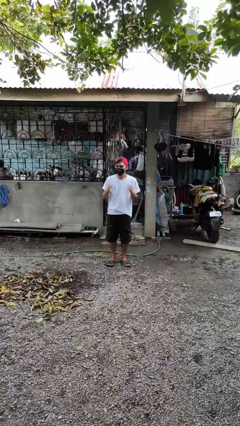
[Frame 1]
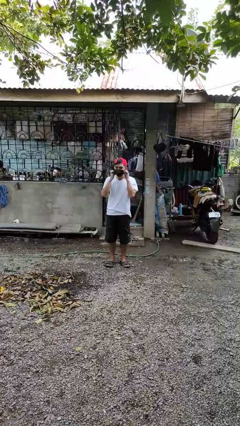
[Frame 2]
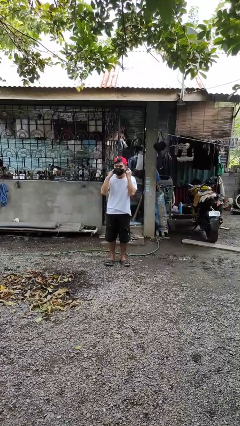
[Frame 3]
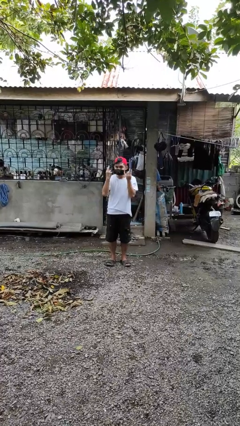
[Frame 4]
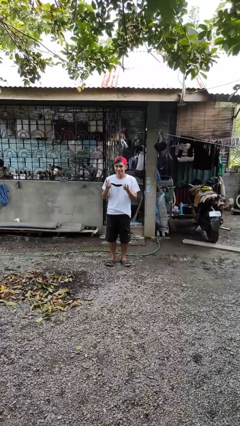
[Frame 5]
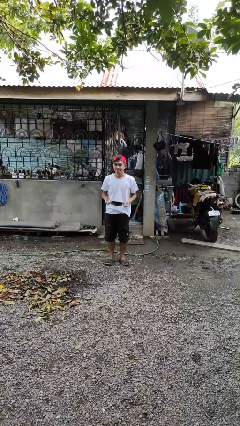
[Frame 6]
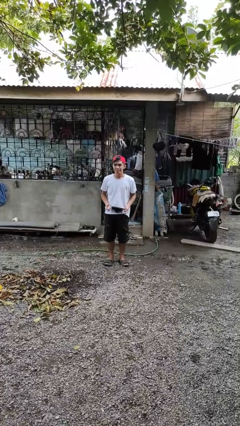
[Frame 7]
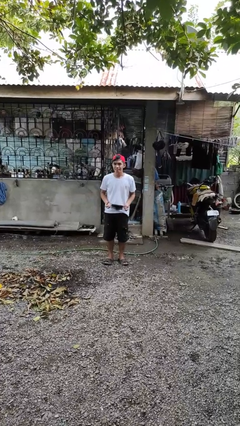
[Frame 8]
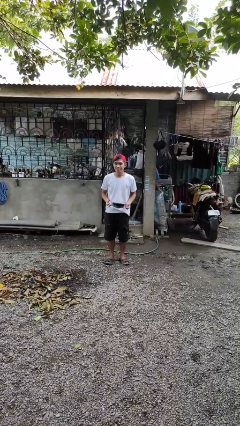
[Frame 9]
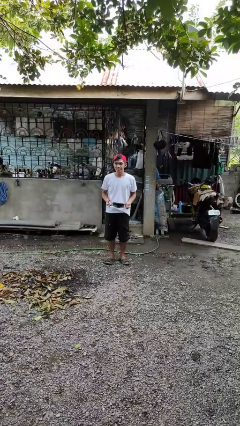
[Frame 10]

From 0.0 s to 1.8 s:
person takes off facemask

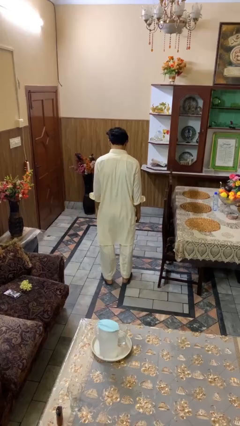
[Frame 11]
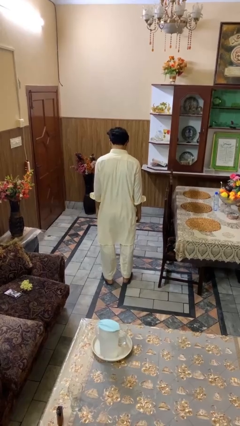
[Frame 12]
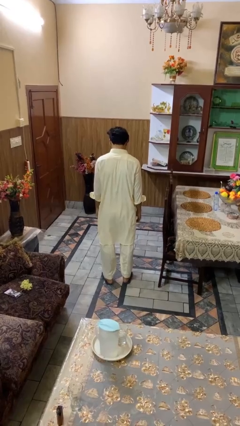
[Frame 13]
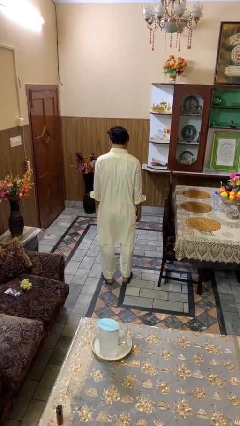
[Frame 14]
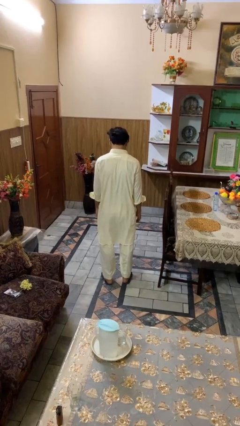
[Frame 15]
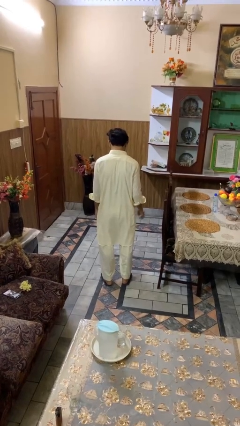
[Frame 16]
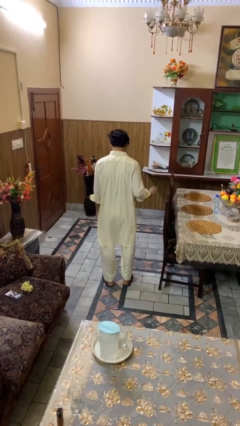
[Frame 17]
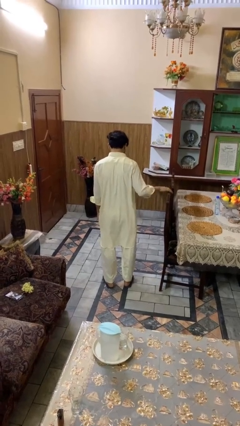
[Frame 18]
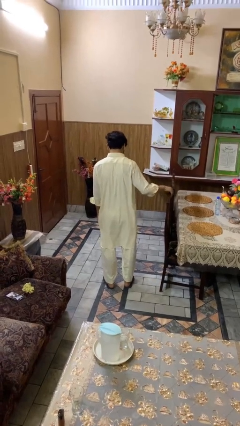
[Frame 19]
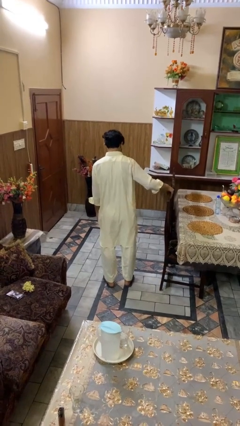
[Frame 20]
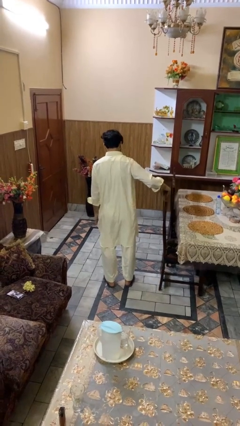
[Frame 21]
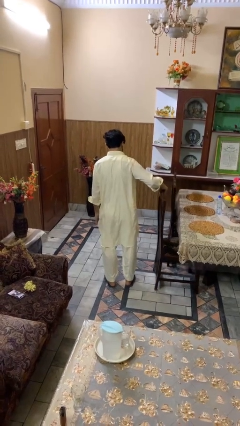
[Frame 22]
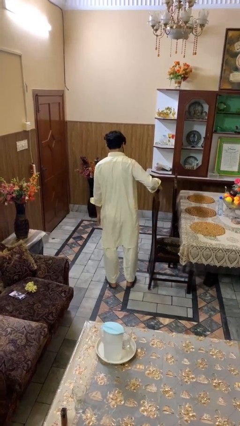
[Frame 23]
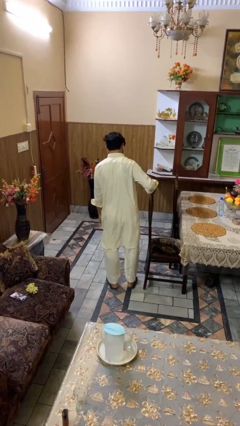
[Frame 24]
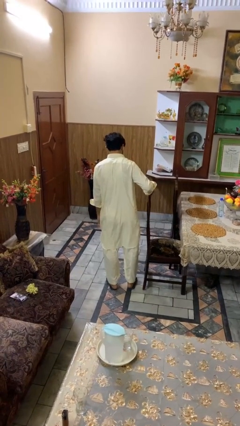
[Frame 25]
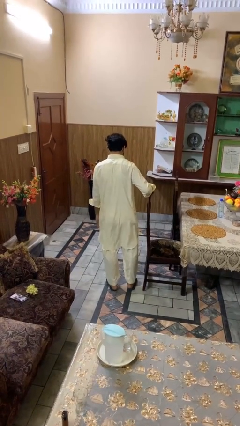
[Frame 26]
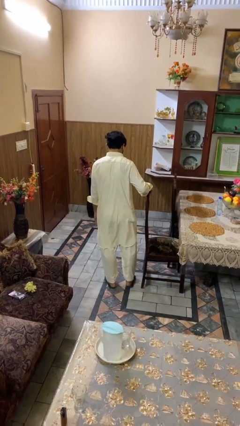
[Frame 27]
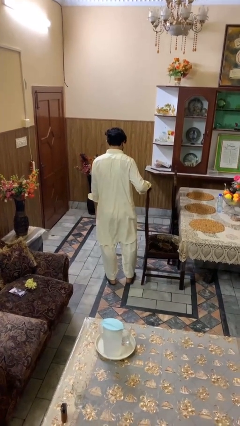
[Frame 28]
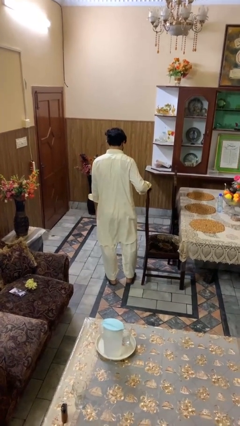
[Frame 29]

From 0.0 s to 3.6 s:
person pulls out chair

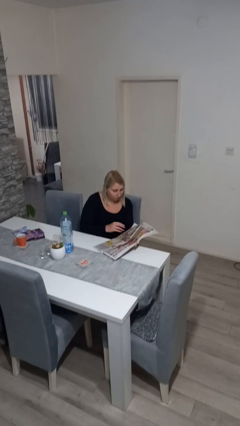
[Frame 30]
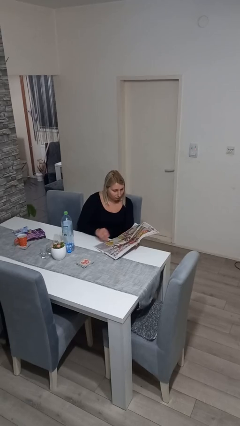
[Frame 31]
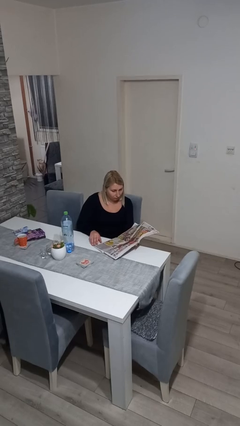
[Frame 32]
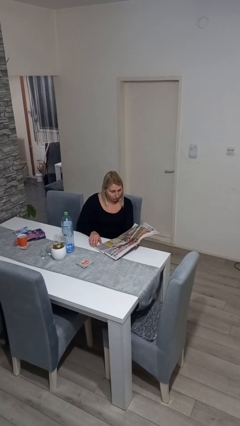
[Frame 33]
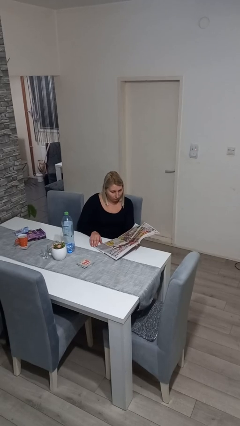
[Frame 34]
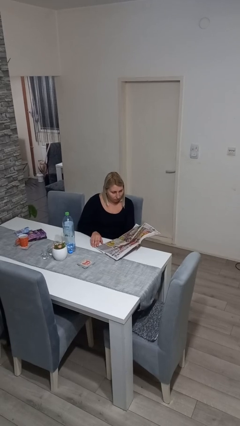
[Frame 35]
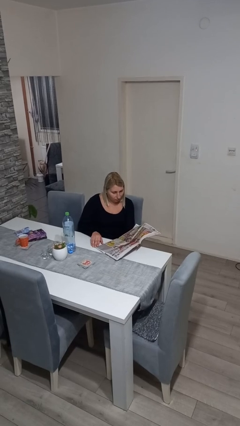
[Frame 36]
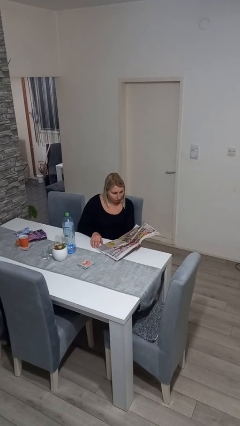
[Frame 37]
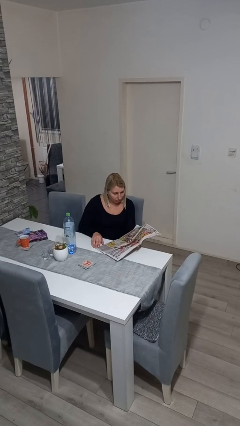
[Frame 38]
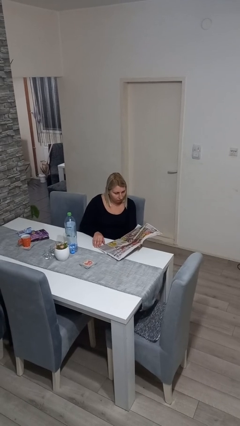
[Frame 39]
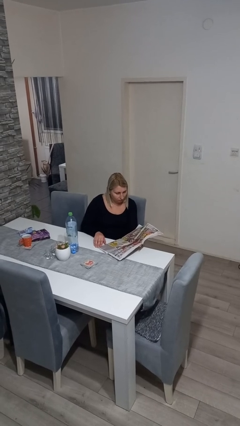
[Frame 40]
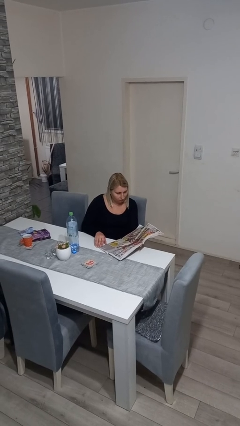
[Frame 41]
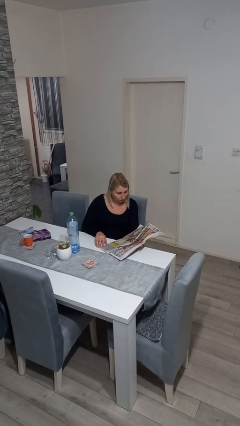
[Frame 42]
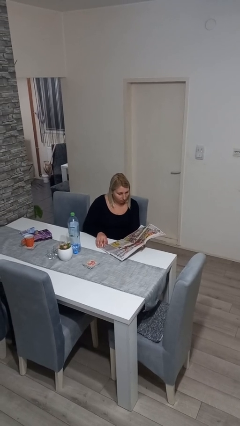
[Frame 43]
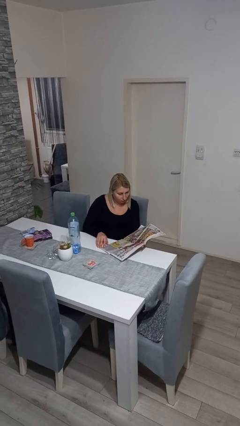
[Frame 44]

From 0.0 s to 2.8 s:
person reads newspaper

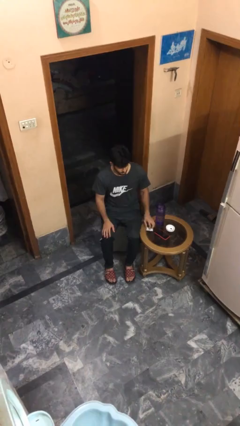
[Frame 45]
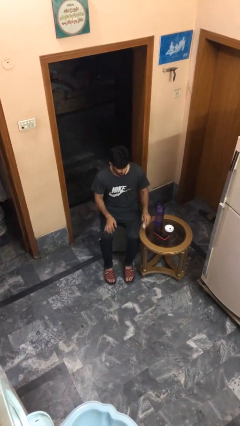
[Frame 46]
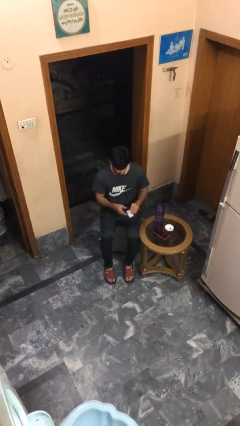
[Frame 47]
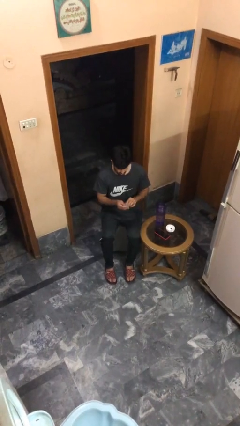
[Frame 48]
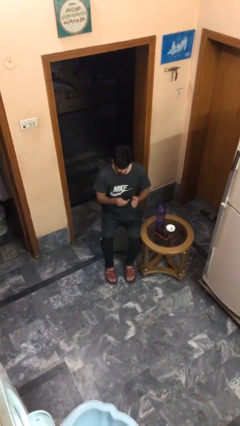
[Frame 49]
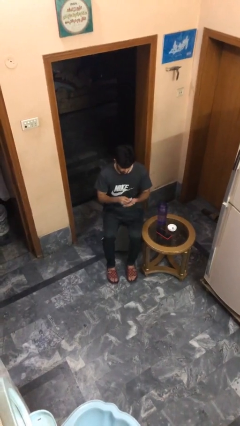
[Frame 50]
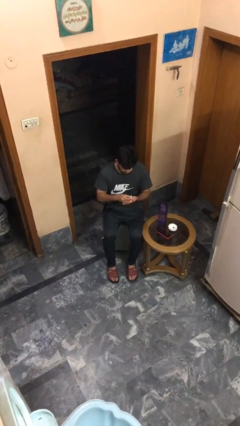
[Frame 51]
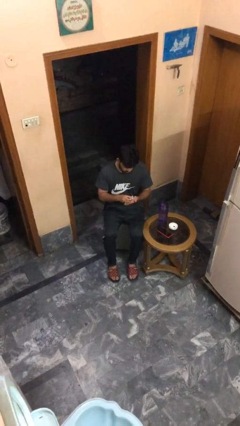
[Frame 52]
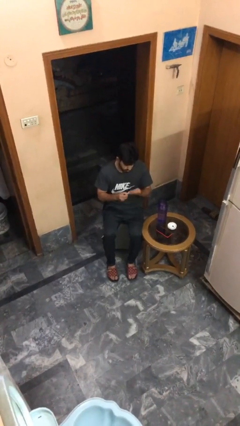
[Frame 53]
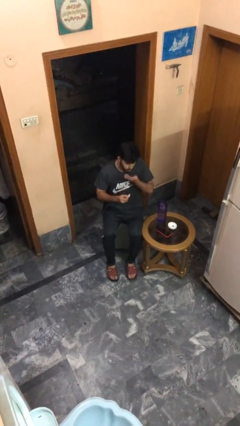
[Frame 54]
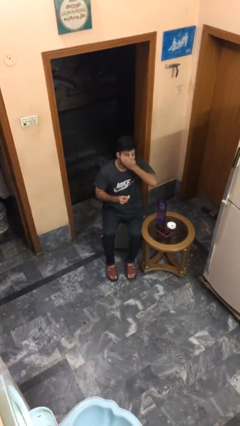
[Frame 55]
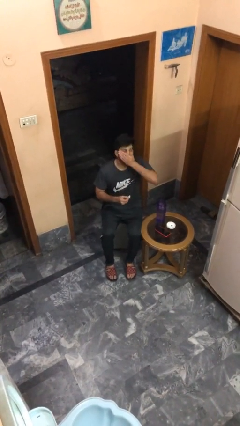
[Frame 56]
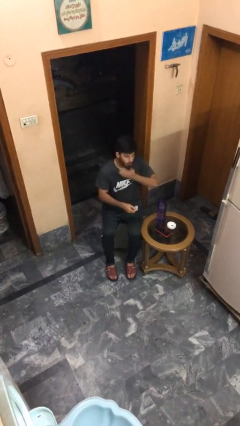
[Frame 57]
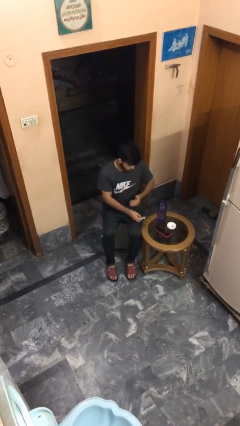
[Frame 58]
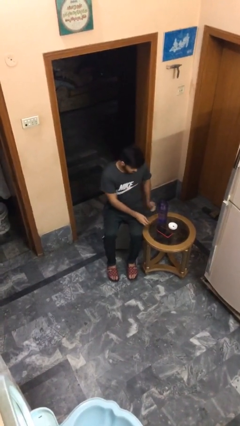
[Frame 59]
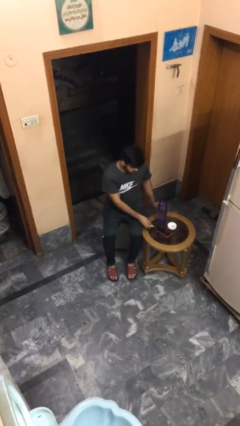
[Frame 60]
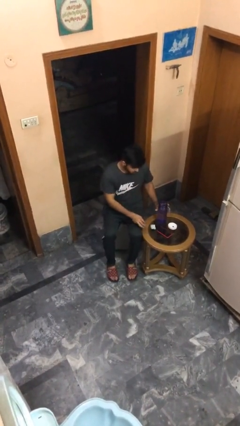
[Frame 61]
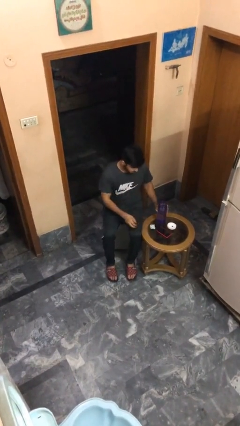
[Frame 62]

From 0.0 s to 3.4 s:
person takes medicine pills

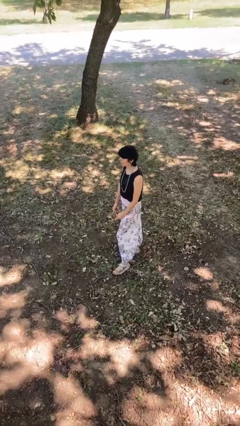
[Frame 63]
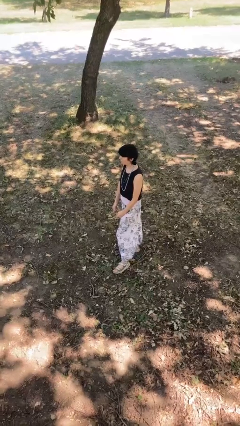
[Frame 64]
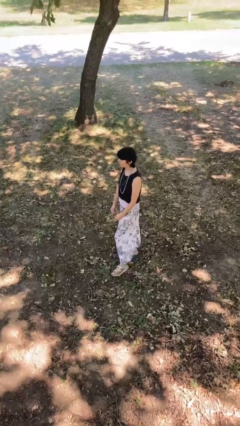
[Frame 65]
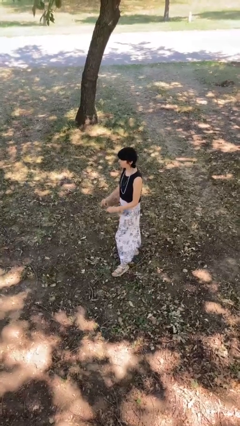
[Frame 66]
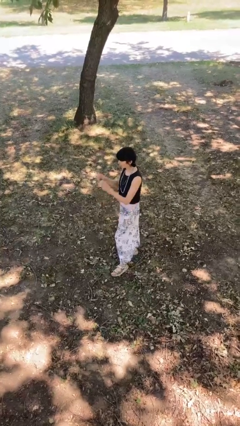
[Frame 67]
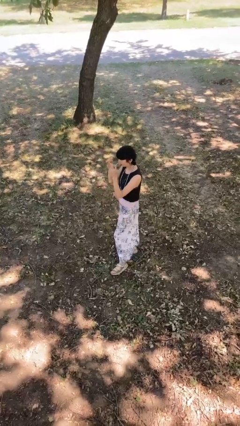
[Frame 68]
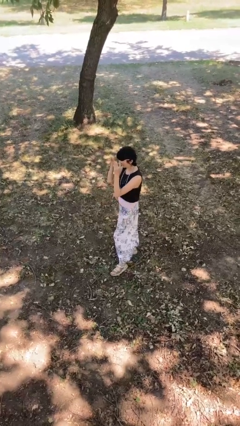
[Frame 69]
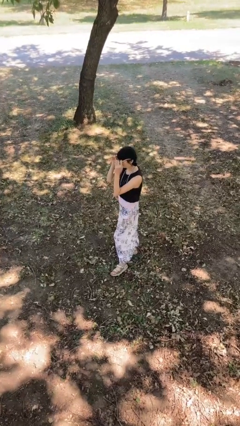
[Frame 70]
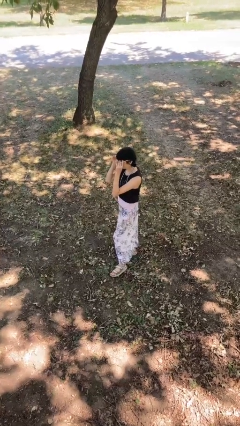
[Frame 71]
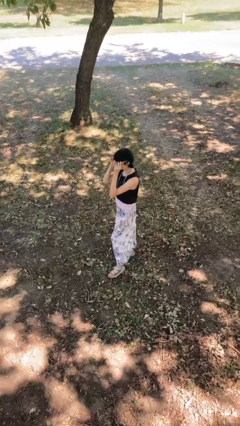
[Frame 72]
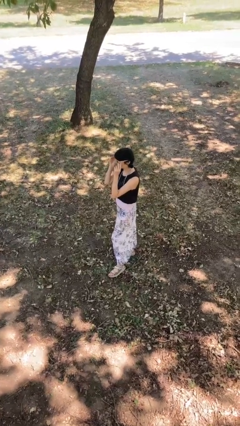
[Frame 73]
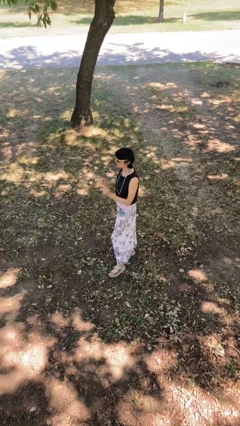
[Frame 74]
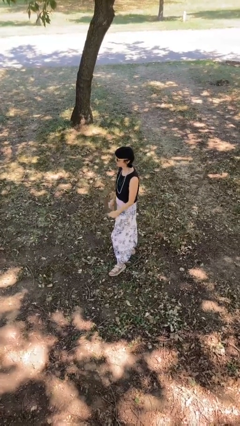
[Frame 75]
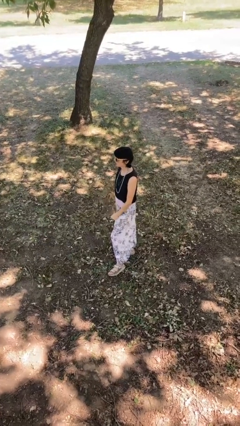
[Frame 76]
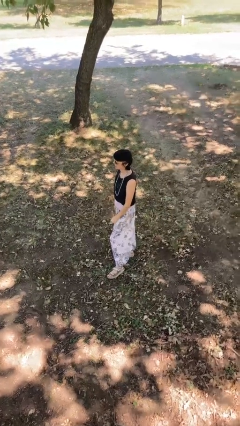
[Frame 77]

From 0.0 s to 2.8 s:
person puts on sunglasses

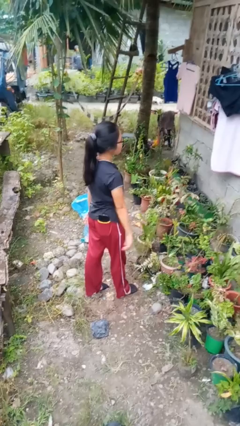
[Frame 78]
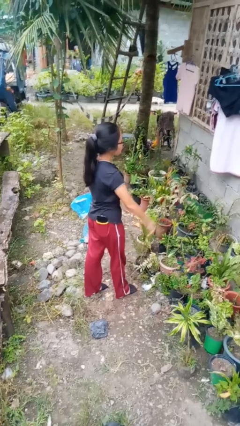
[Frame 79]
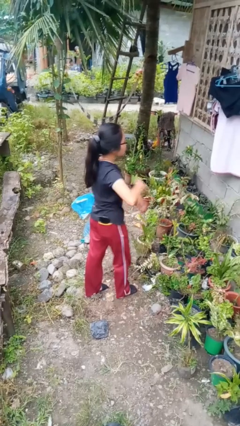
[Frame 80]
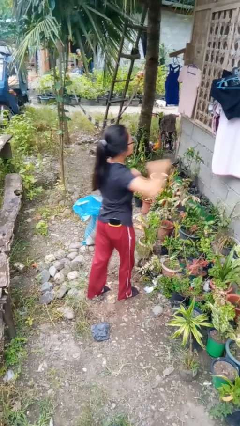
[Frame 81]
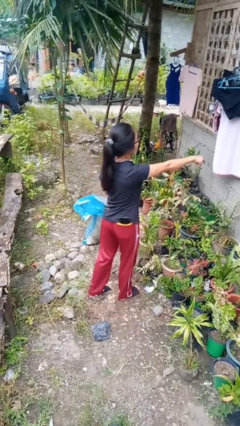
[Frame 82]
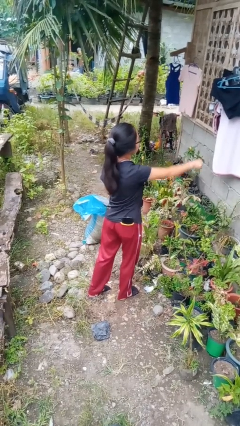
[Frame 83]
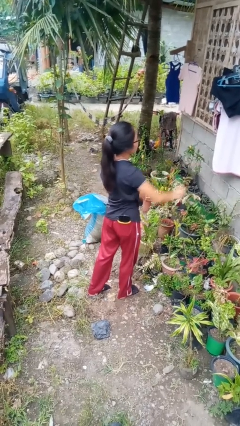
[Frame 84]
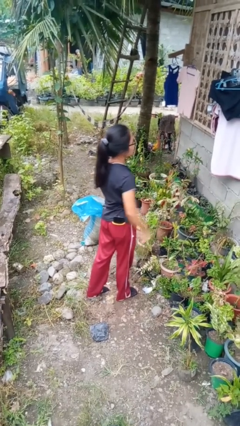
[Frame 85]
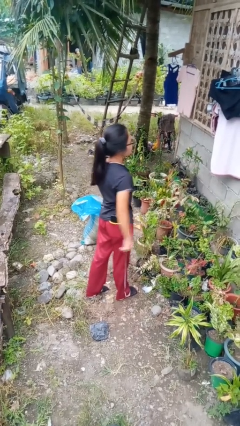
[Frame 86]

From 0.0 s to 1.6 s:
person punches

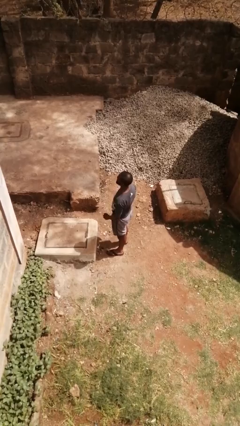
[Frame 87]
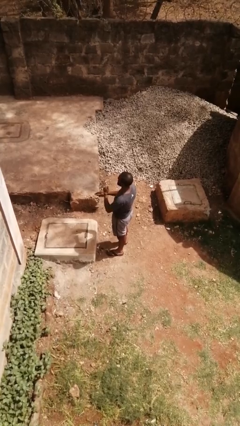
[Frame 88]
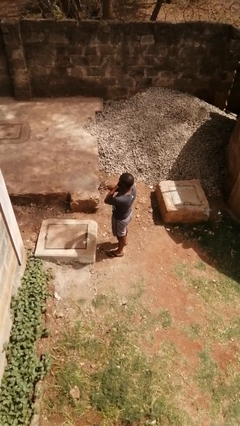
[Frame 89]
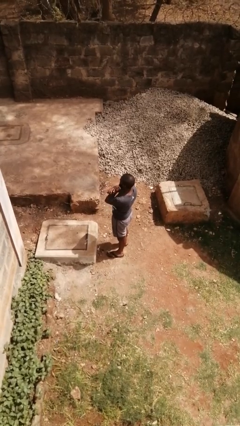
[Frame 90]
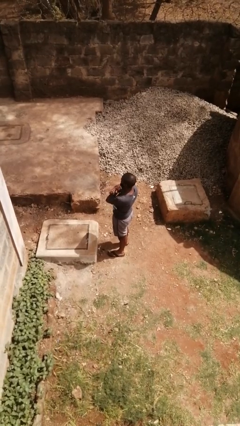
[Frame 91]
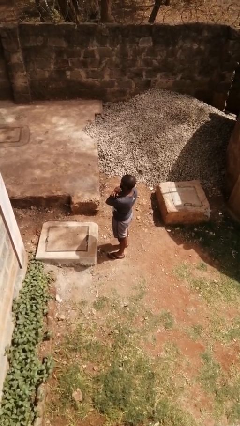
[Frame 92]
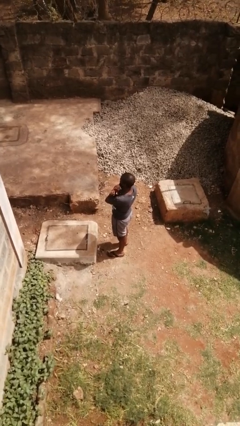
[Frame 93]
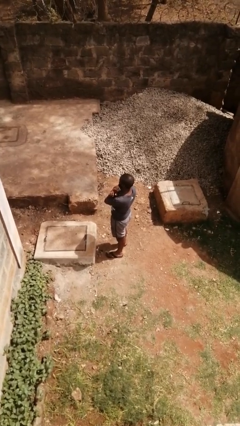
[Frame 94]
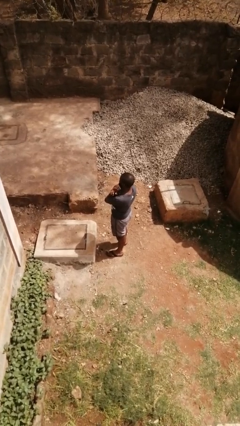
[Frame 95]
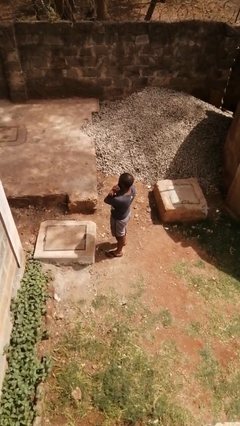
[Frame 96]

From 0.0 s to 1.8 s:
person gestures arms x
